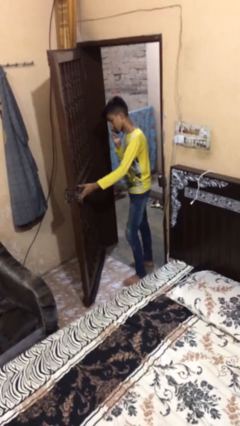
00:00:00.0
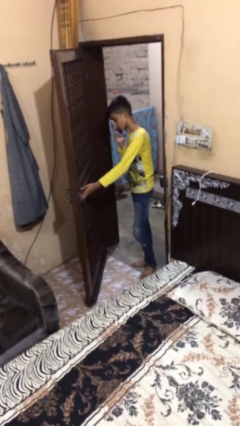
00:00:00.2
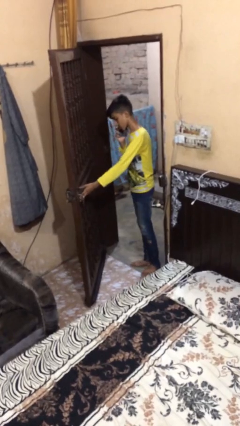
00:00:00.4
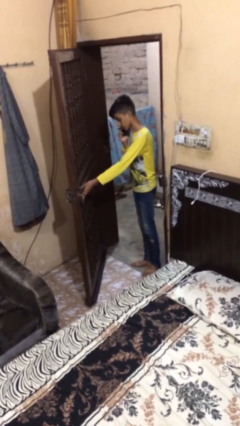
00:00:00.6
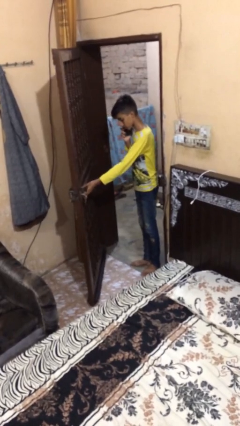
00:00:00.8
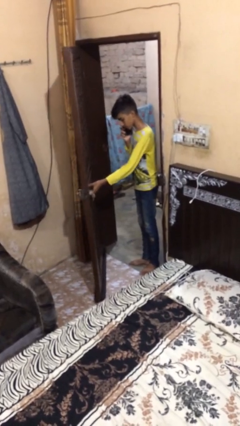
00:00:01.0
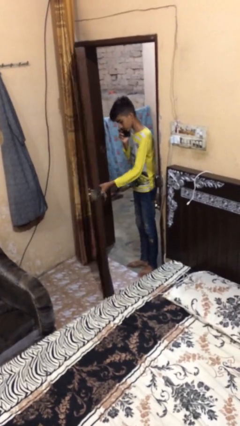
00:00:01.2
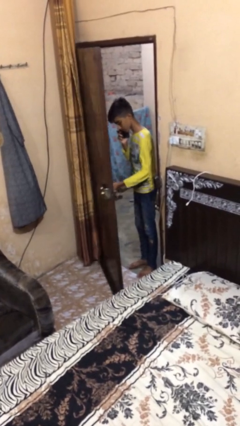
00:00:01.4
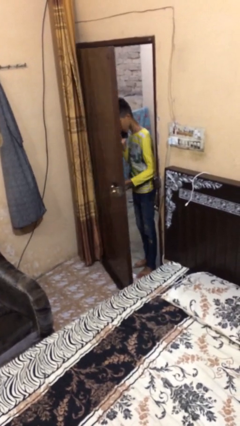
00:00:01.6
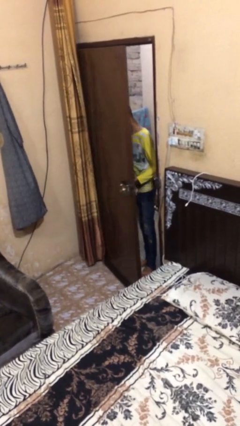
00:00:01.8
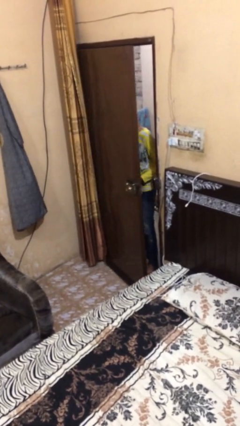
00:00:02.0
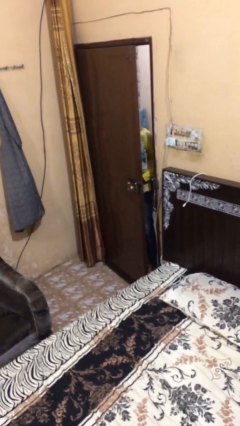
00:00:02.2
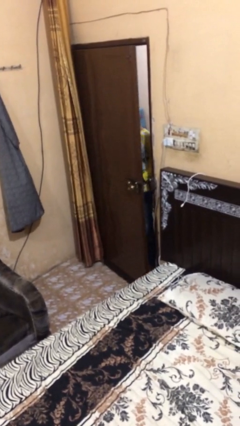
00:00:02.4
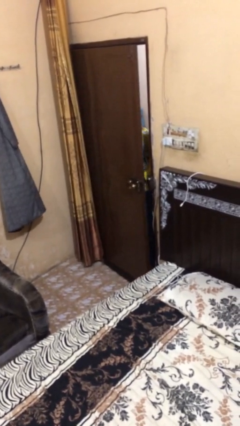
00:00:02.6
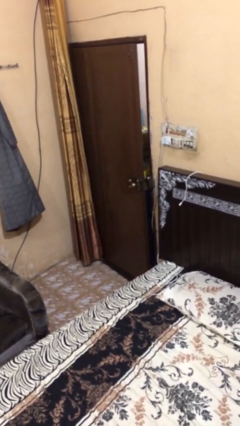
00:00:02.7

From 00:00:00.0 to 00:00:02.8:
person closes facility door

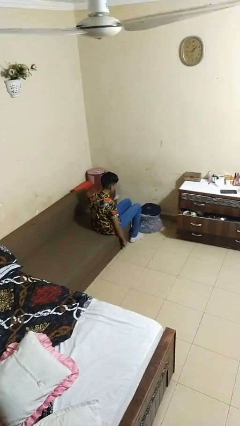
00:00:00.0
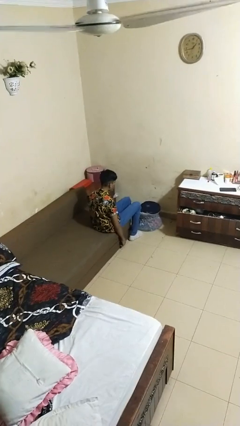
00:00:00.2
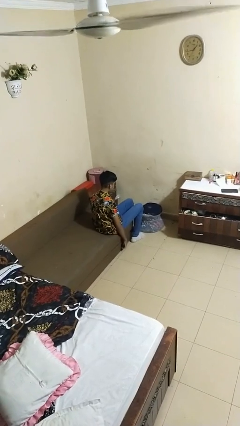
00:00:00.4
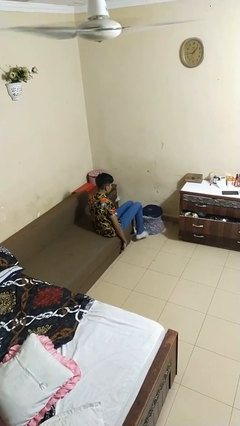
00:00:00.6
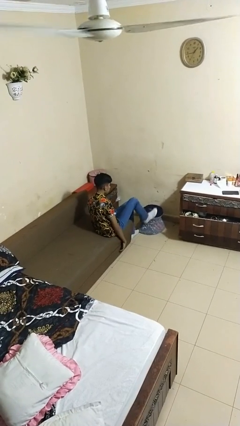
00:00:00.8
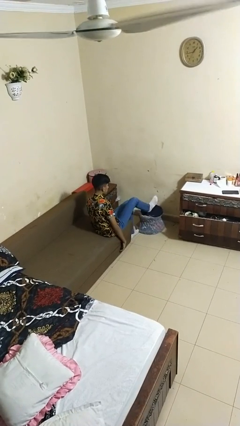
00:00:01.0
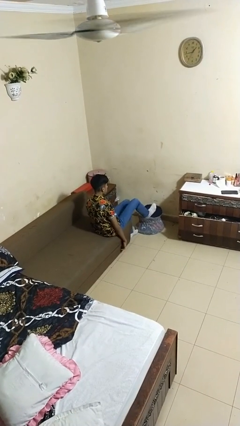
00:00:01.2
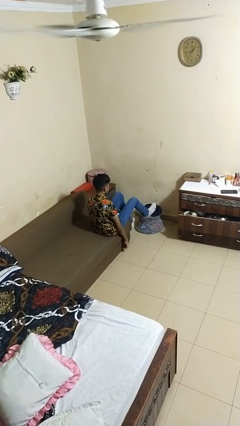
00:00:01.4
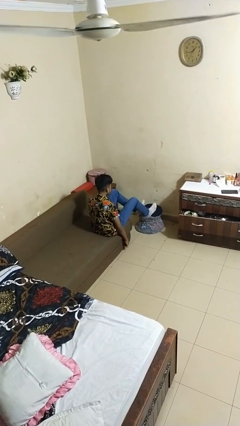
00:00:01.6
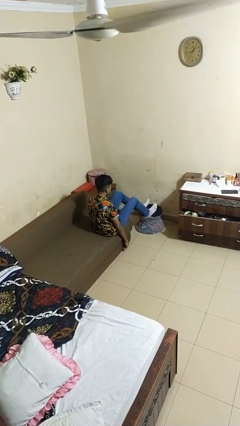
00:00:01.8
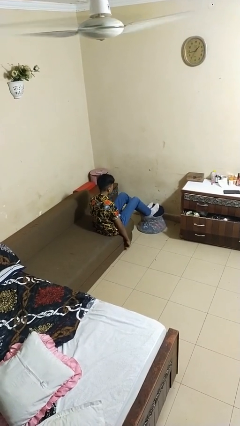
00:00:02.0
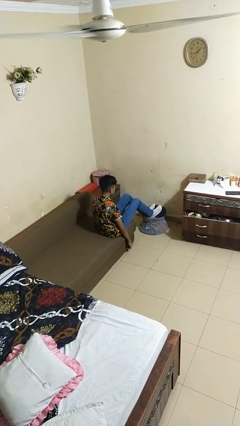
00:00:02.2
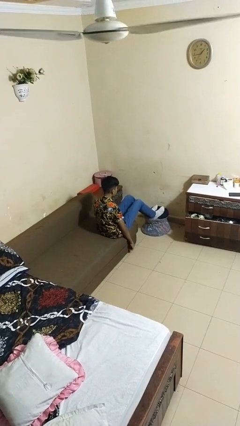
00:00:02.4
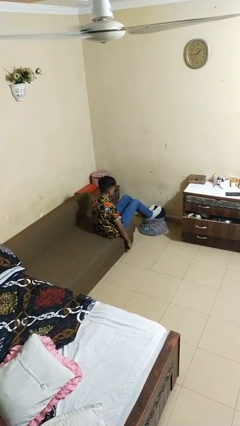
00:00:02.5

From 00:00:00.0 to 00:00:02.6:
person puts feet up

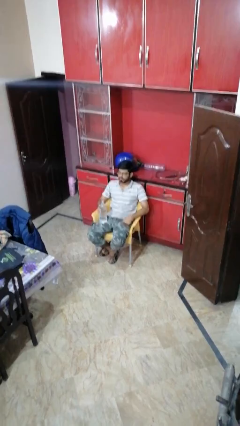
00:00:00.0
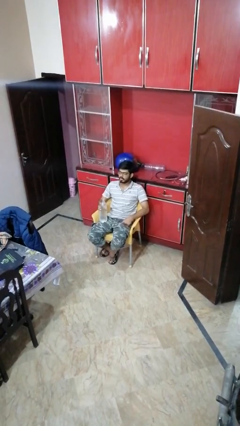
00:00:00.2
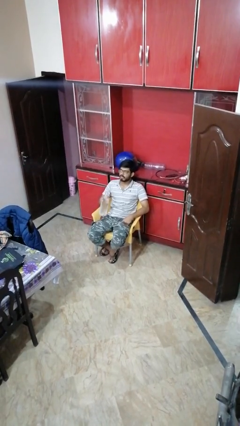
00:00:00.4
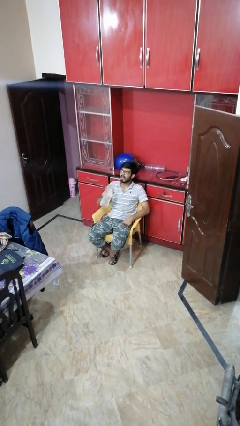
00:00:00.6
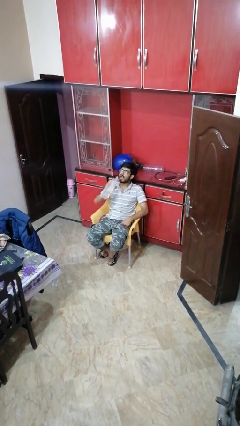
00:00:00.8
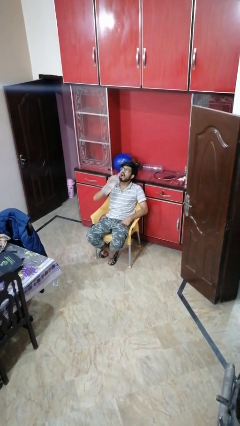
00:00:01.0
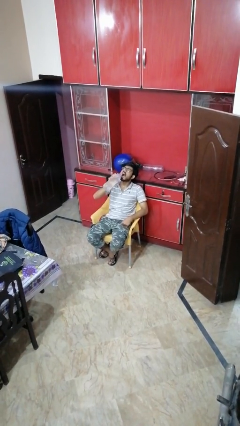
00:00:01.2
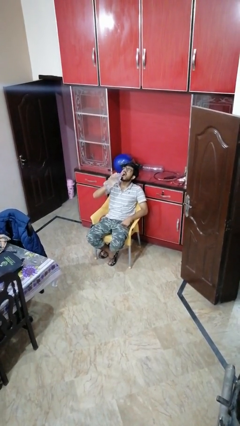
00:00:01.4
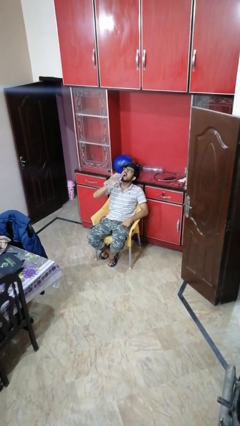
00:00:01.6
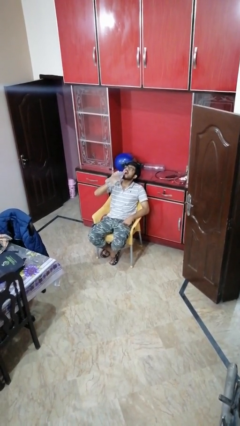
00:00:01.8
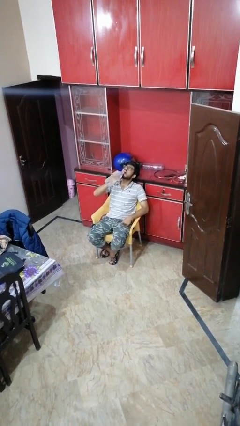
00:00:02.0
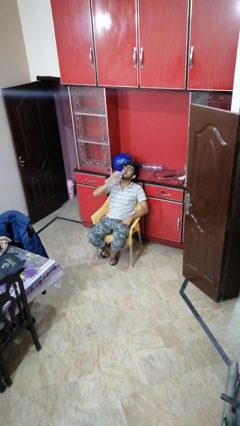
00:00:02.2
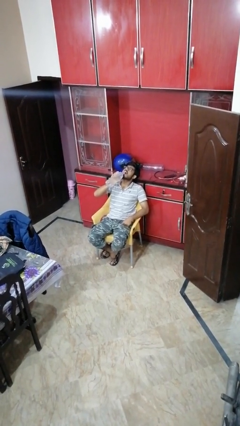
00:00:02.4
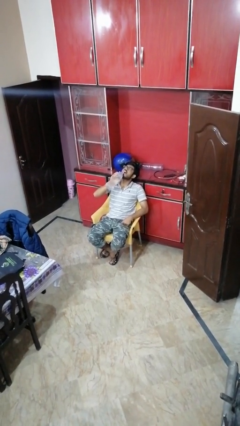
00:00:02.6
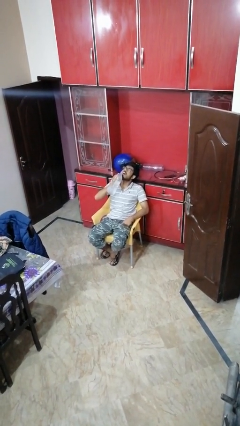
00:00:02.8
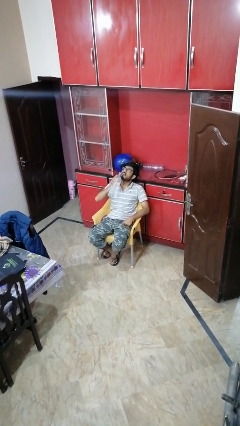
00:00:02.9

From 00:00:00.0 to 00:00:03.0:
person drinks from bottle

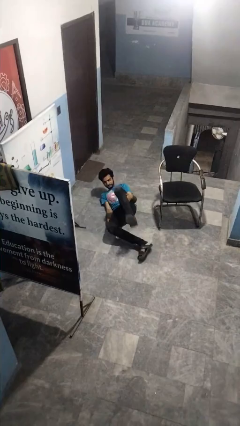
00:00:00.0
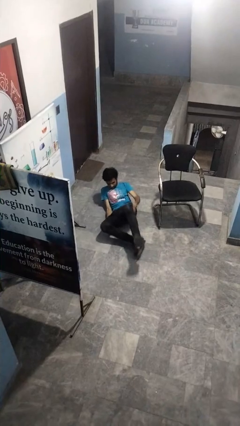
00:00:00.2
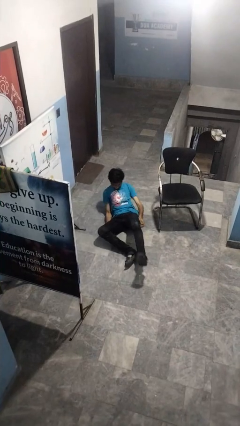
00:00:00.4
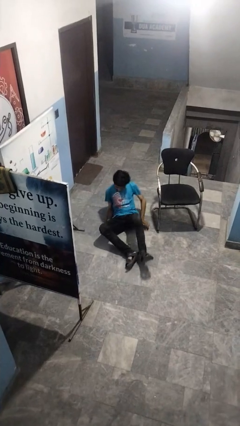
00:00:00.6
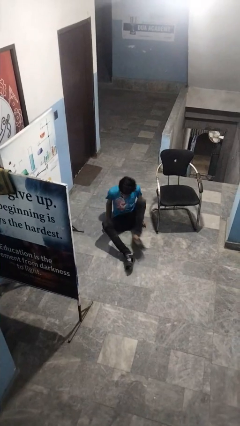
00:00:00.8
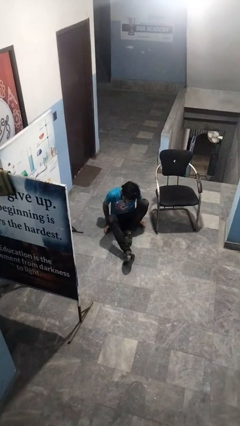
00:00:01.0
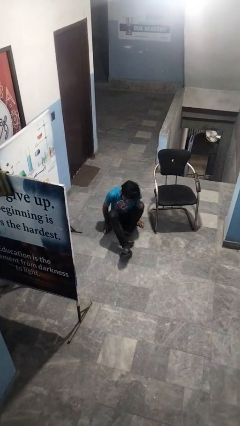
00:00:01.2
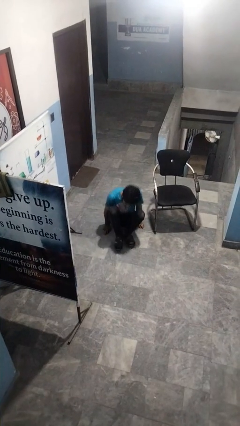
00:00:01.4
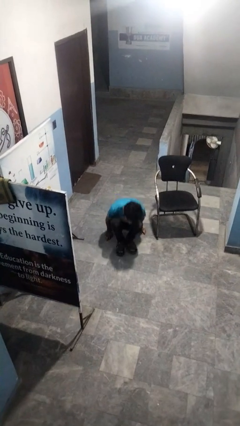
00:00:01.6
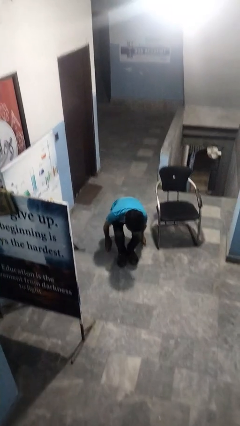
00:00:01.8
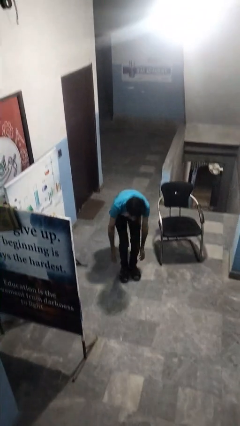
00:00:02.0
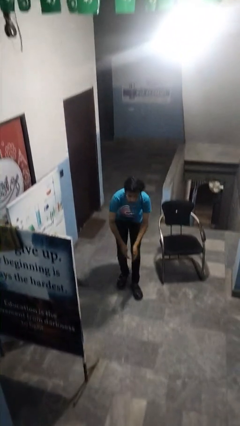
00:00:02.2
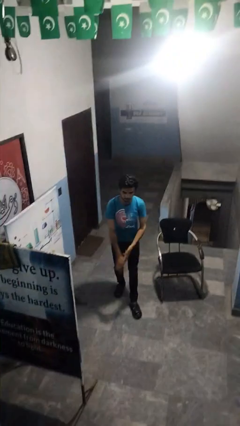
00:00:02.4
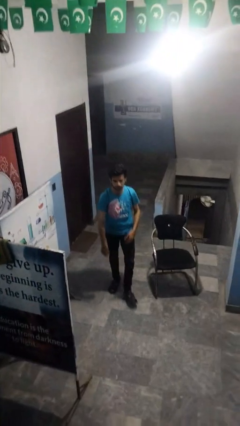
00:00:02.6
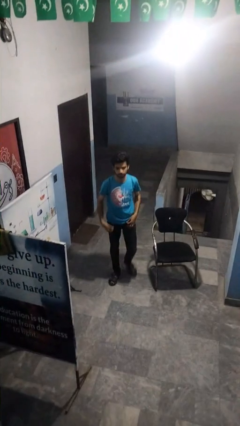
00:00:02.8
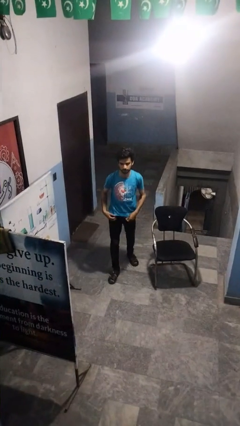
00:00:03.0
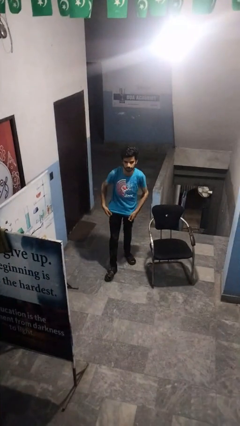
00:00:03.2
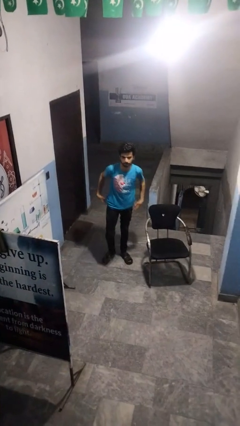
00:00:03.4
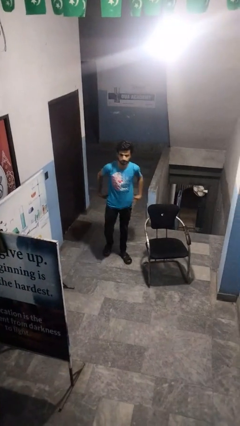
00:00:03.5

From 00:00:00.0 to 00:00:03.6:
person stands up from floor

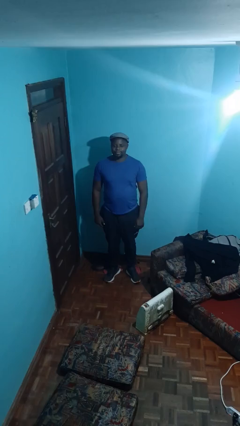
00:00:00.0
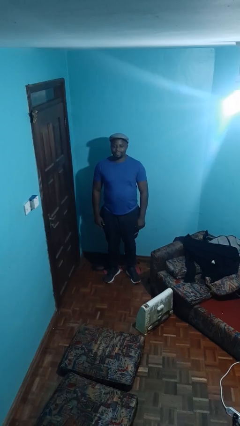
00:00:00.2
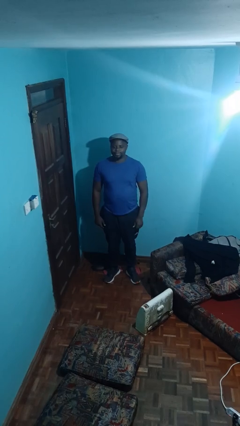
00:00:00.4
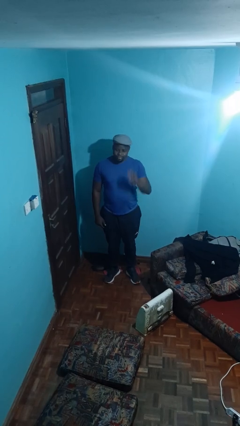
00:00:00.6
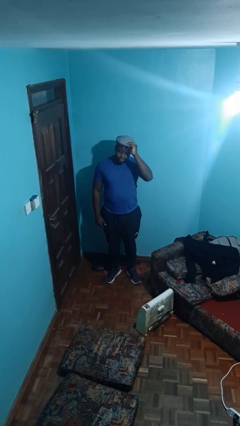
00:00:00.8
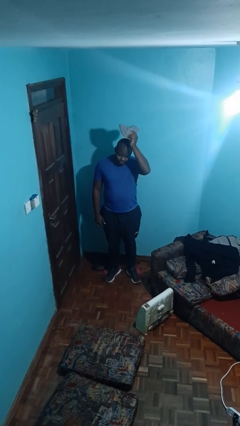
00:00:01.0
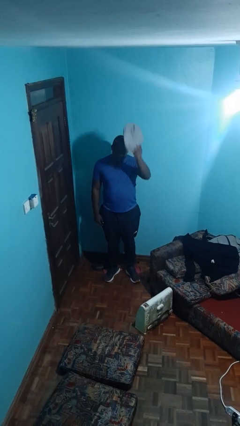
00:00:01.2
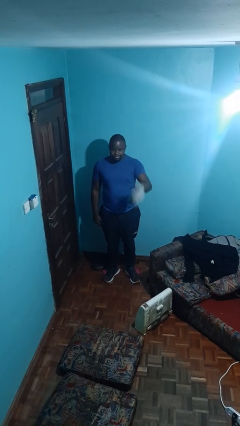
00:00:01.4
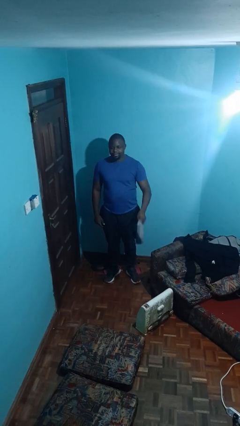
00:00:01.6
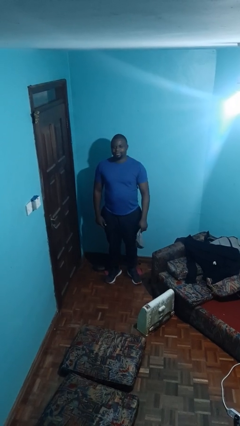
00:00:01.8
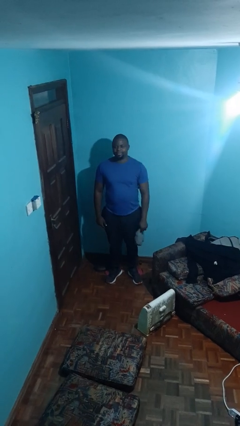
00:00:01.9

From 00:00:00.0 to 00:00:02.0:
person takes off hat

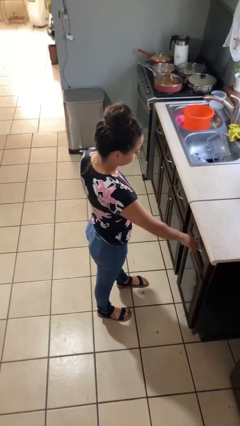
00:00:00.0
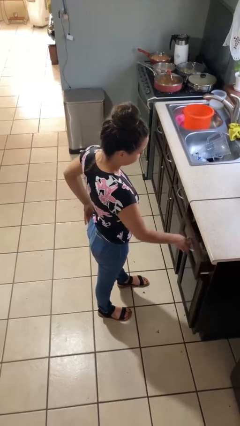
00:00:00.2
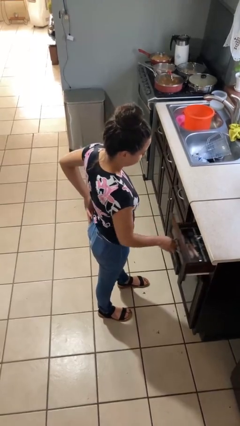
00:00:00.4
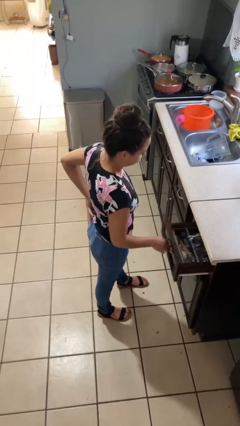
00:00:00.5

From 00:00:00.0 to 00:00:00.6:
person opens kitchen drawer

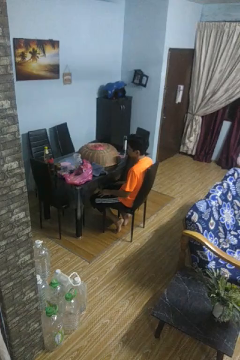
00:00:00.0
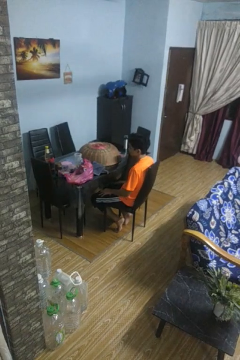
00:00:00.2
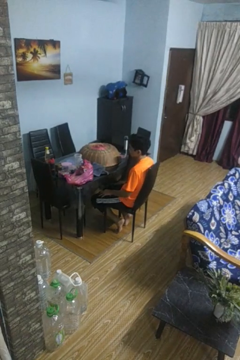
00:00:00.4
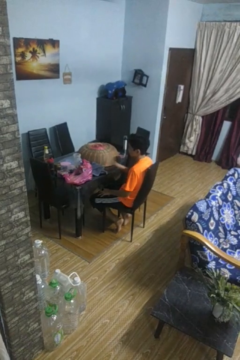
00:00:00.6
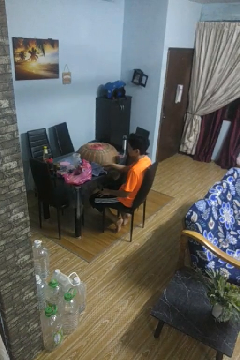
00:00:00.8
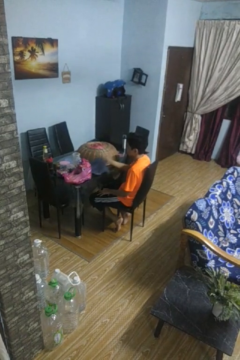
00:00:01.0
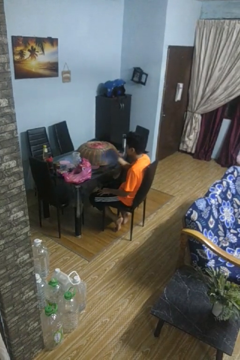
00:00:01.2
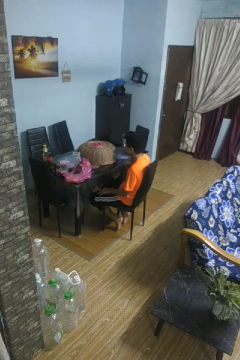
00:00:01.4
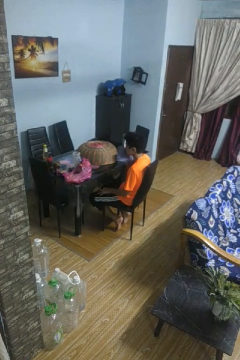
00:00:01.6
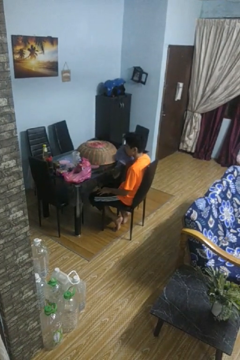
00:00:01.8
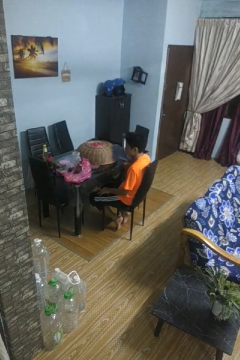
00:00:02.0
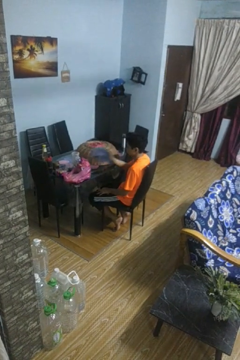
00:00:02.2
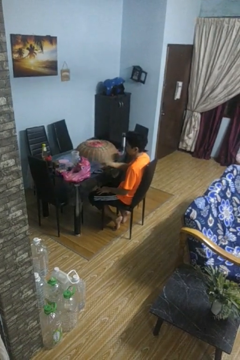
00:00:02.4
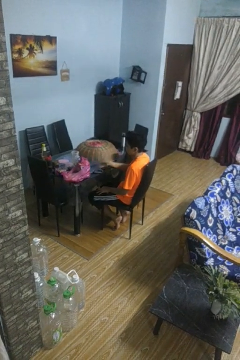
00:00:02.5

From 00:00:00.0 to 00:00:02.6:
person wipes mouth with napkin

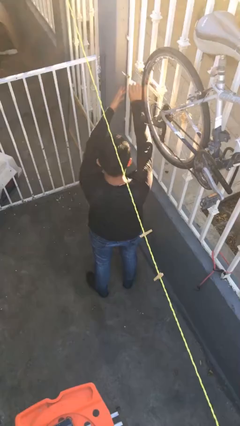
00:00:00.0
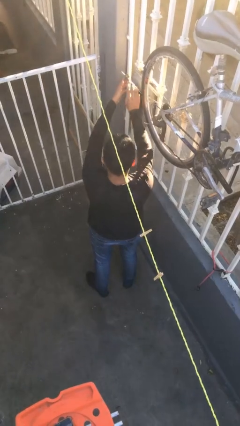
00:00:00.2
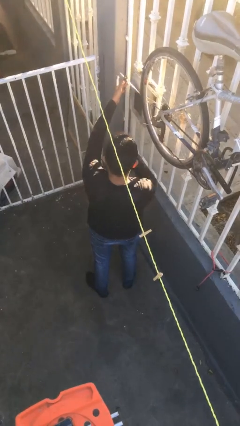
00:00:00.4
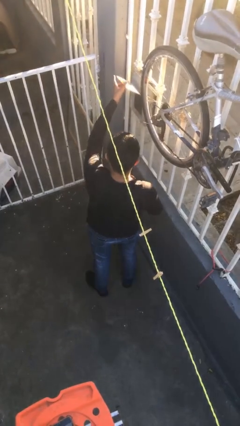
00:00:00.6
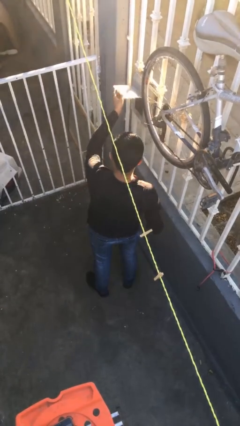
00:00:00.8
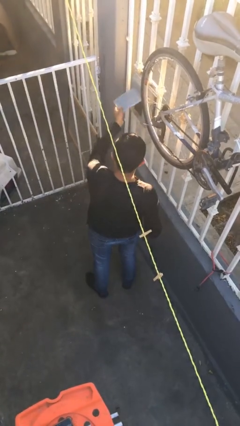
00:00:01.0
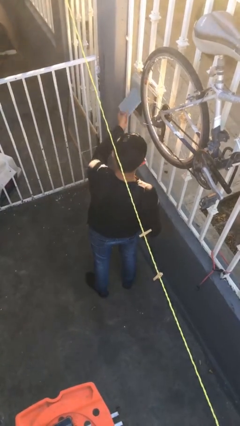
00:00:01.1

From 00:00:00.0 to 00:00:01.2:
person closes mailbox